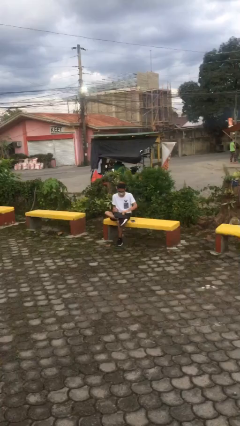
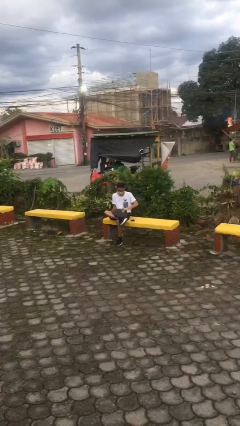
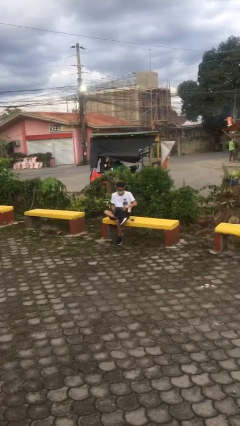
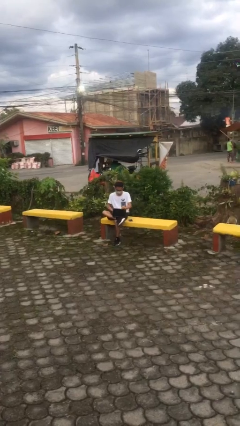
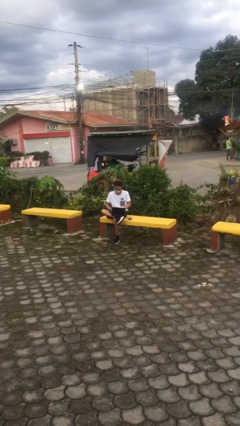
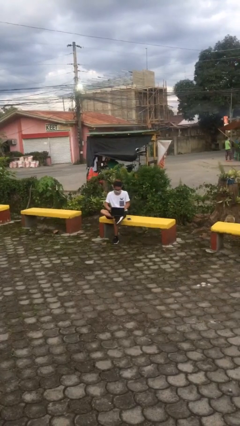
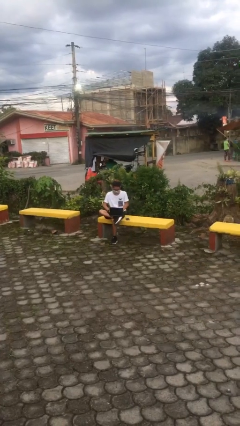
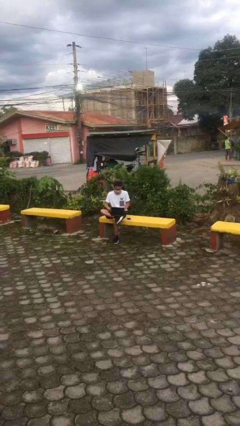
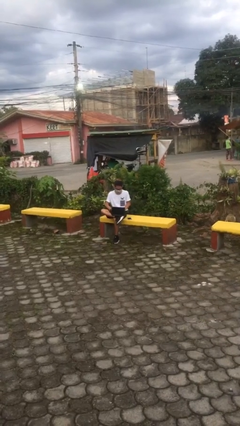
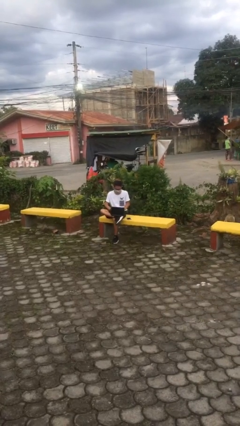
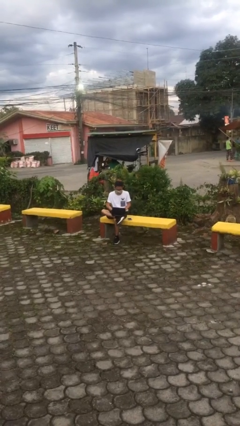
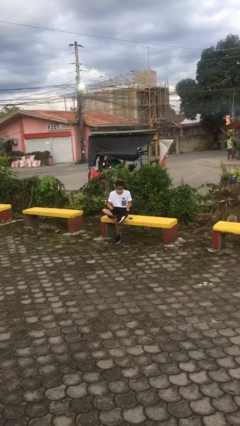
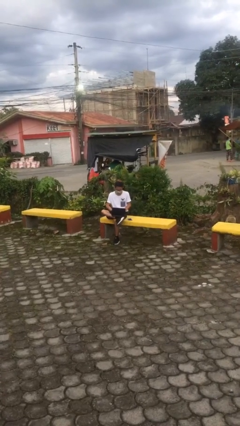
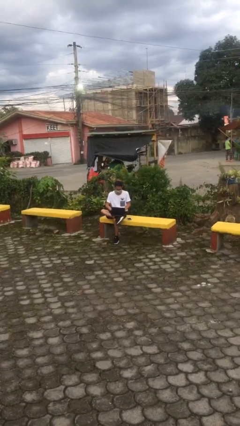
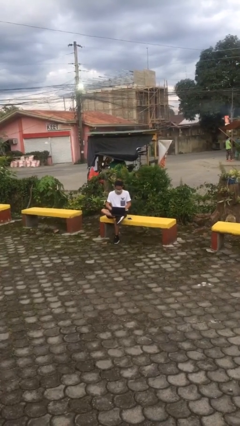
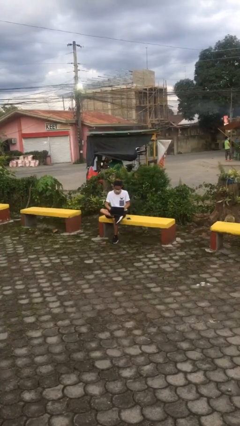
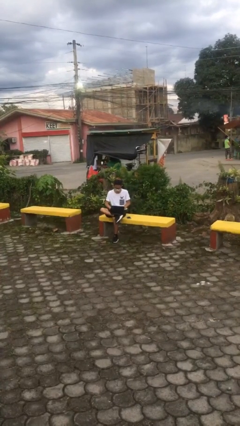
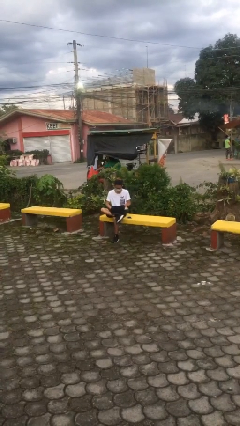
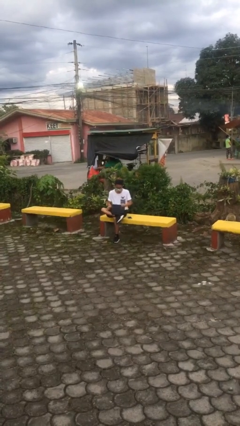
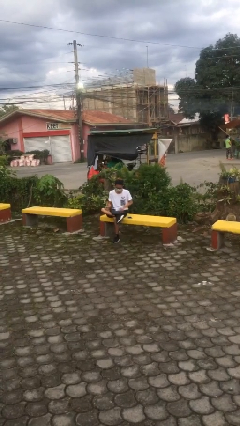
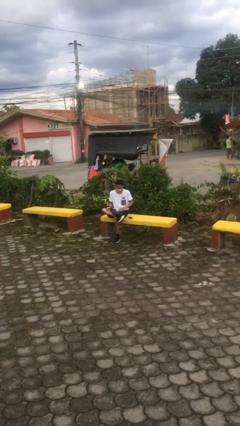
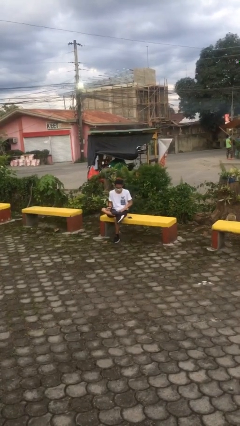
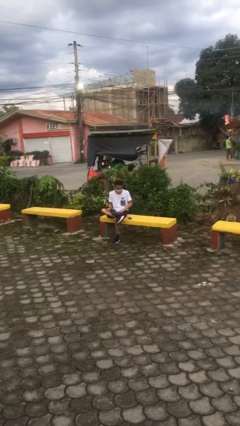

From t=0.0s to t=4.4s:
person interacts with laptop

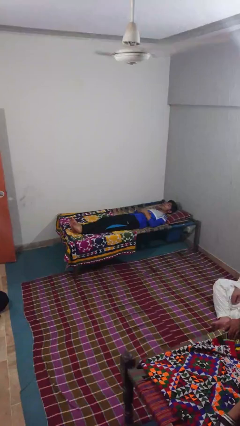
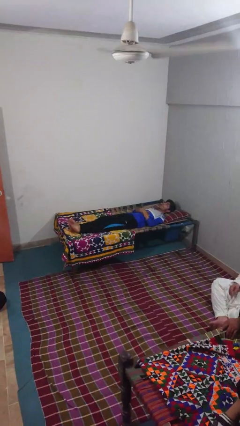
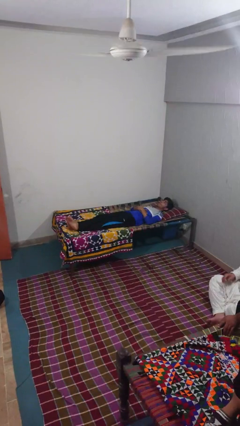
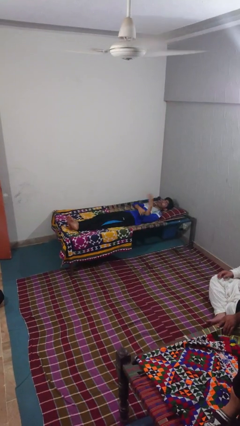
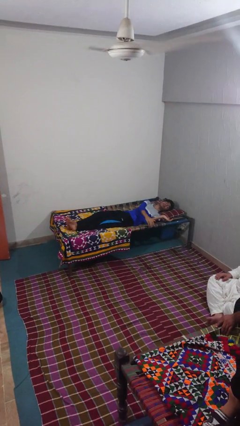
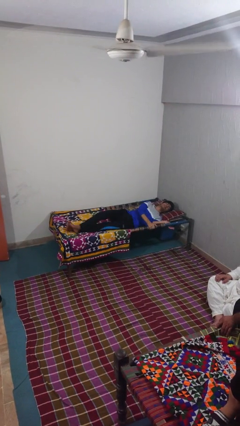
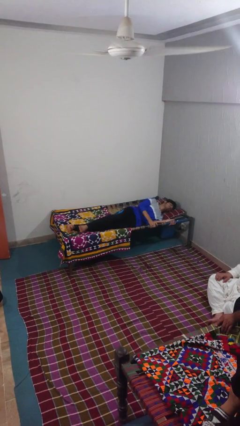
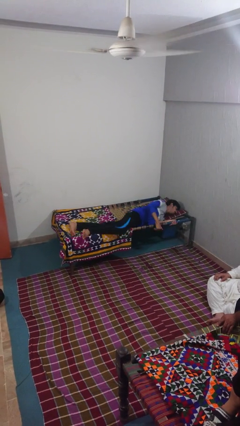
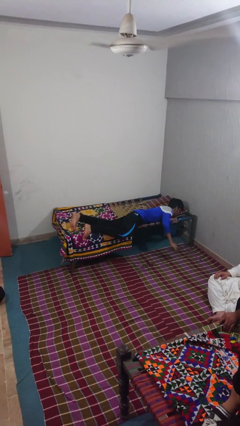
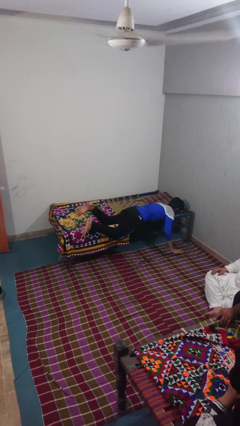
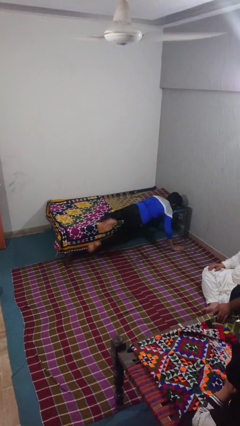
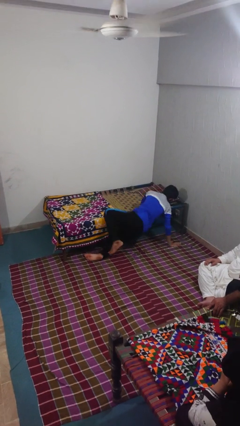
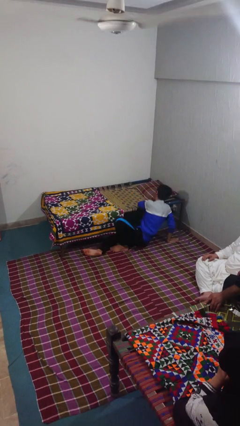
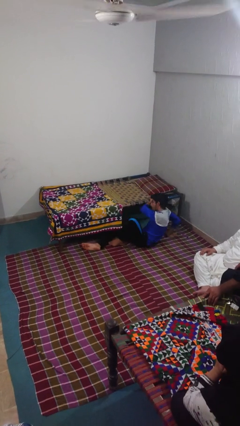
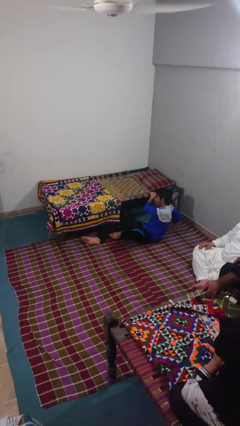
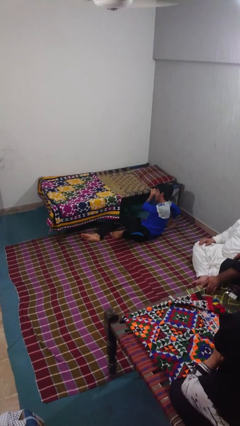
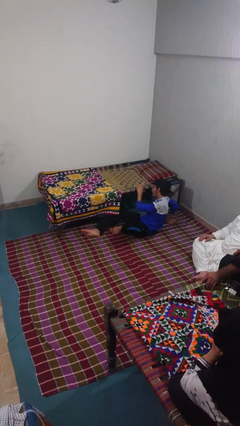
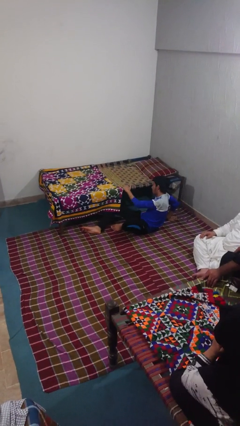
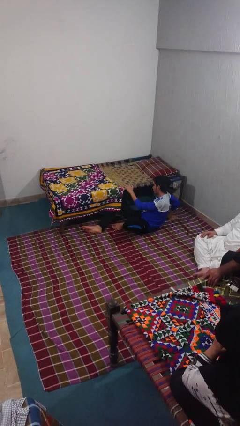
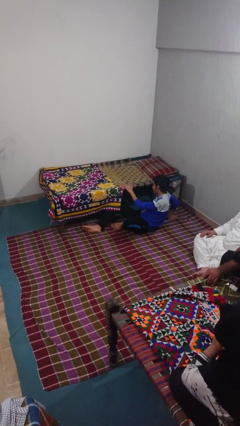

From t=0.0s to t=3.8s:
person falls from bed

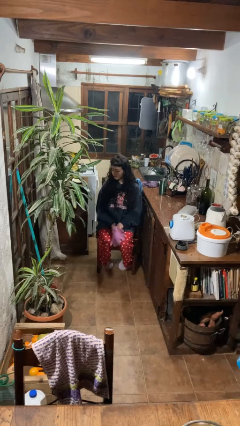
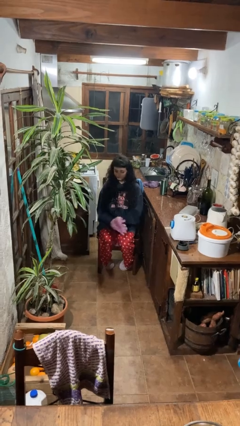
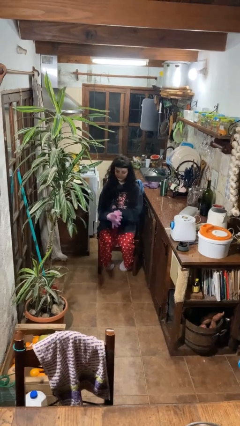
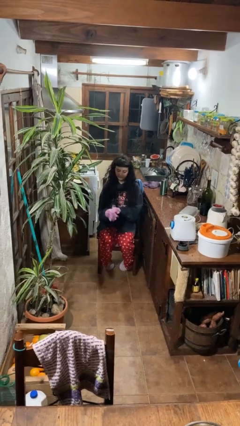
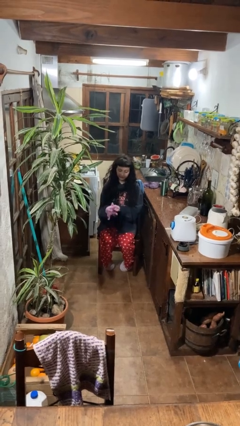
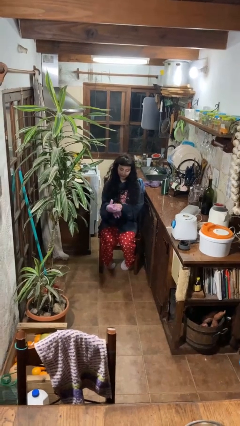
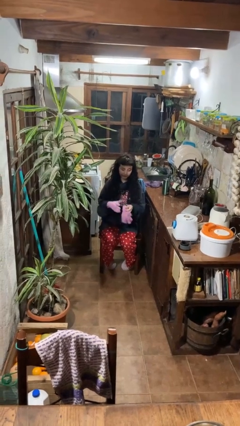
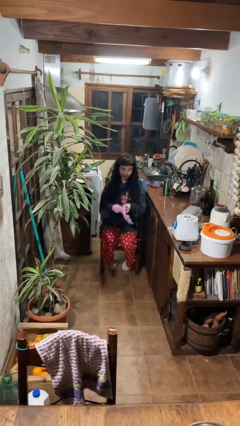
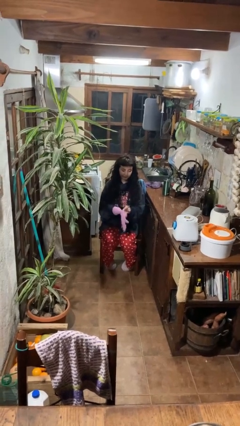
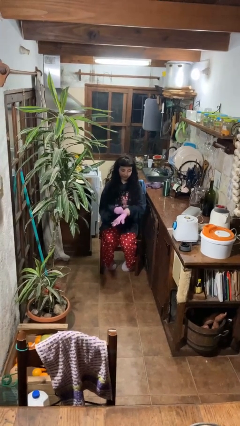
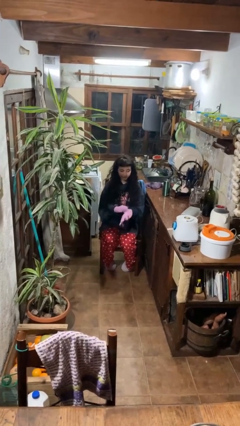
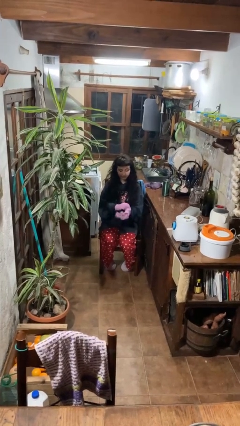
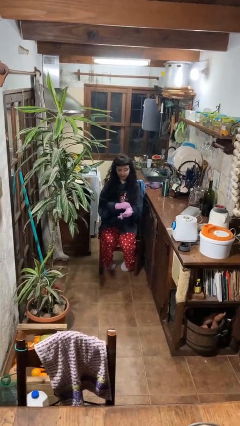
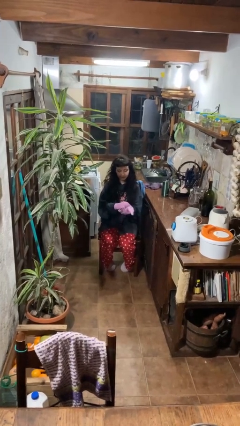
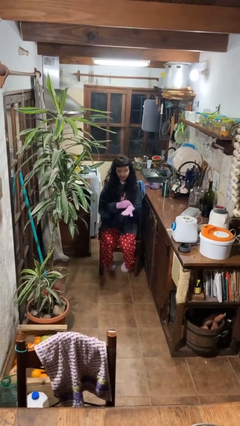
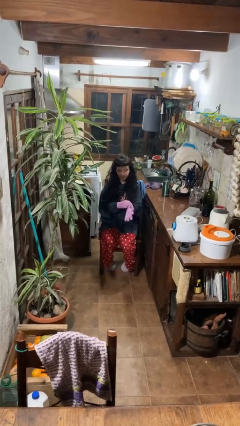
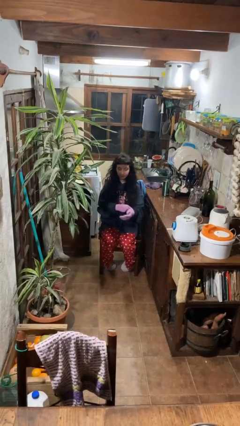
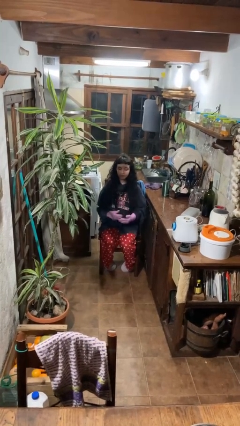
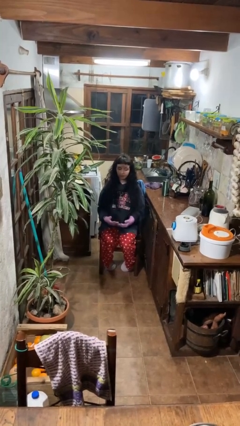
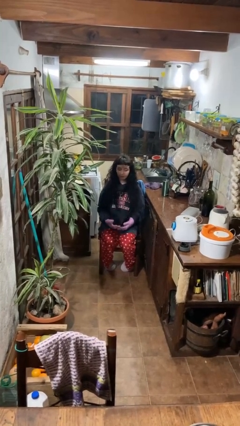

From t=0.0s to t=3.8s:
person puts on gloves

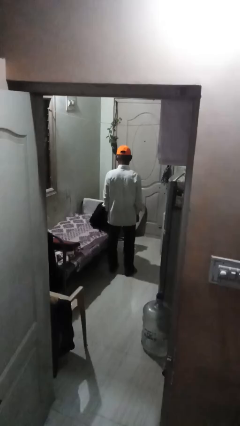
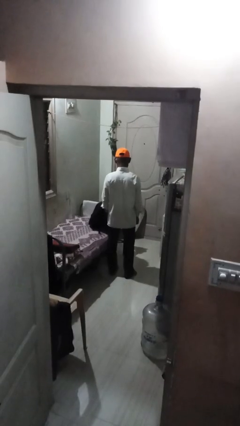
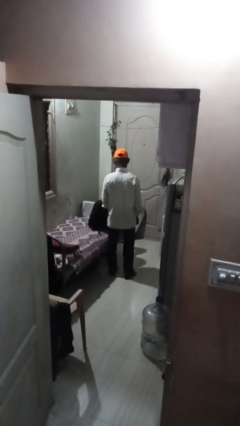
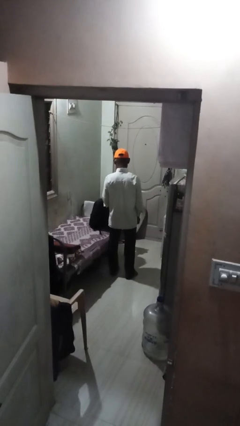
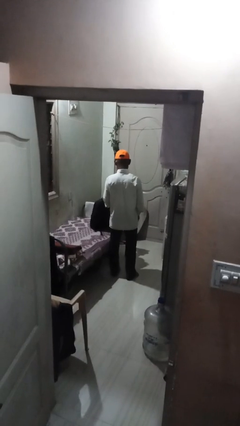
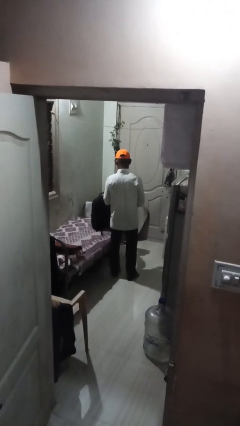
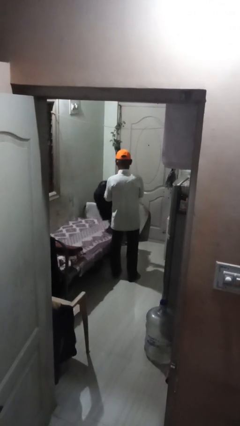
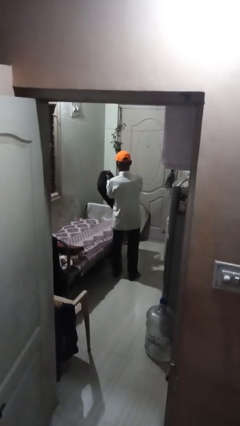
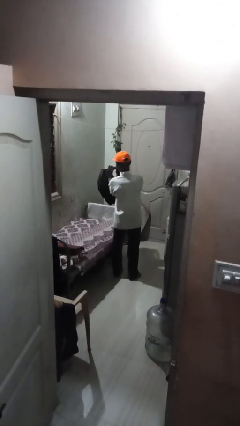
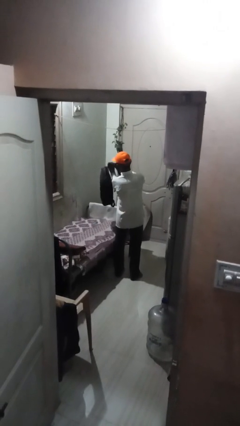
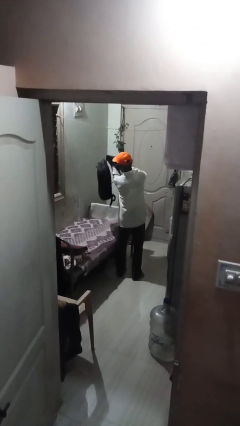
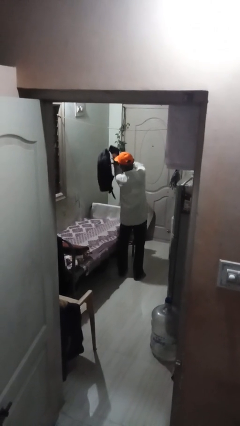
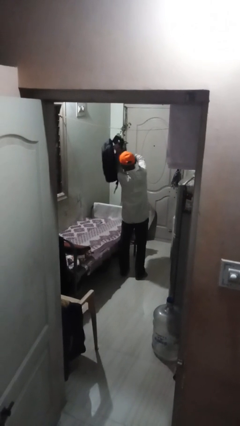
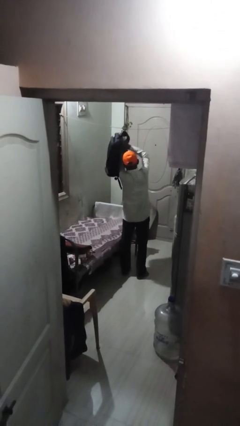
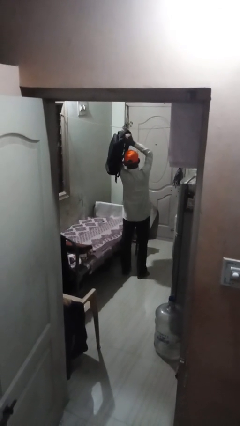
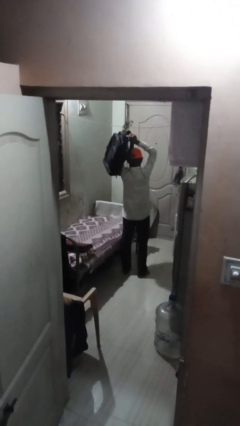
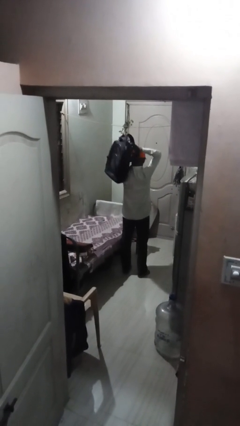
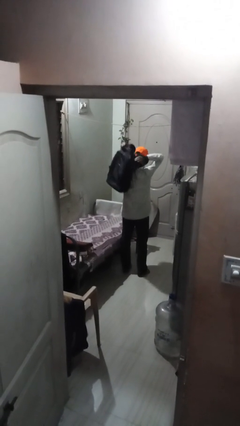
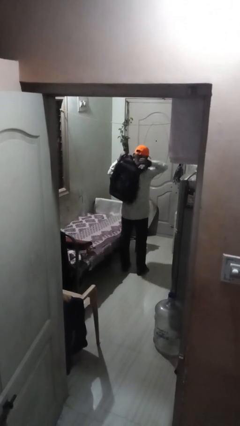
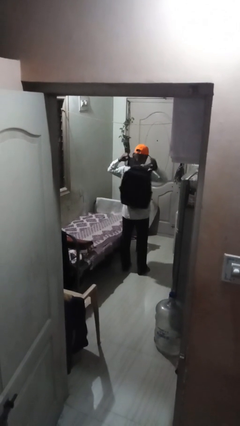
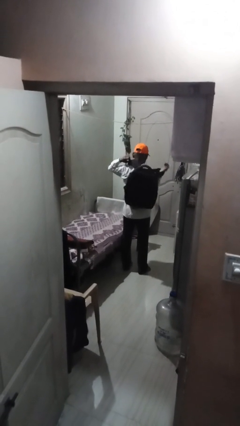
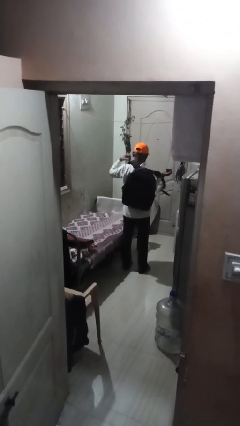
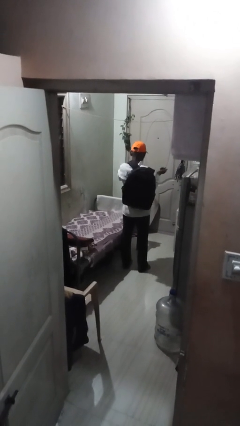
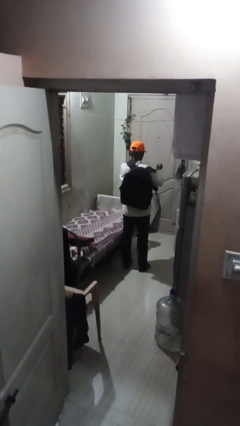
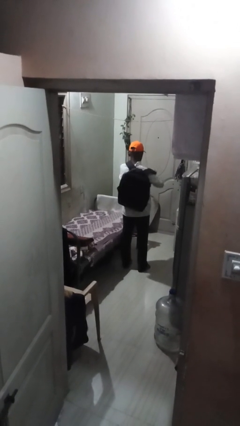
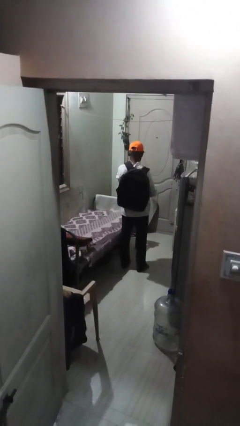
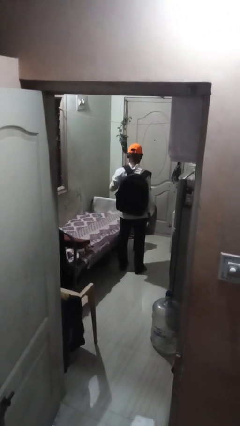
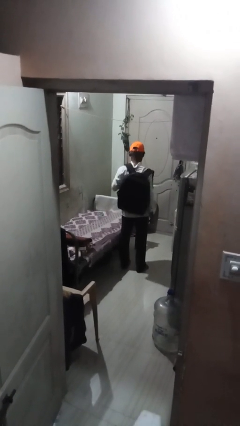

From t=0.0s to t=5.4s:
person puts on backpack
